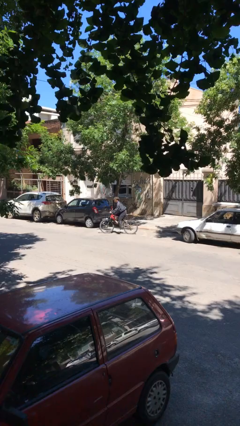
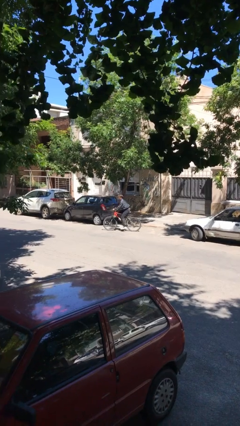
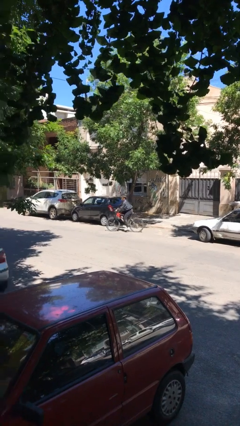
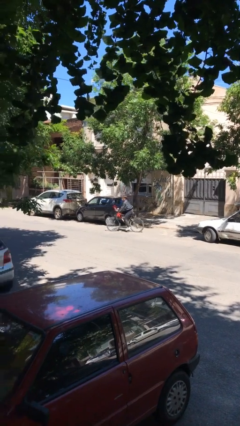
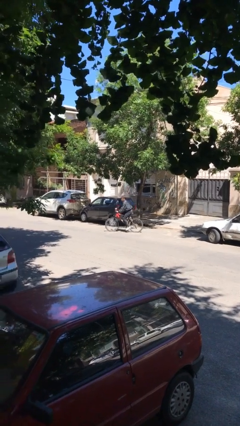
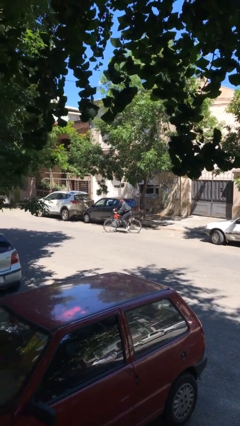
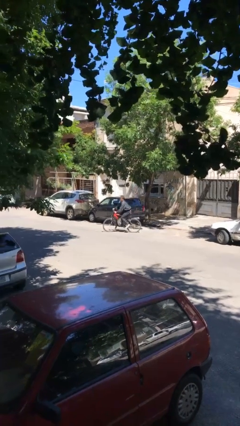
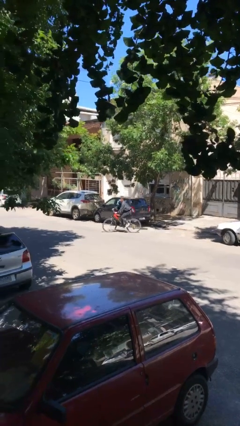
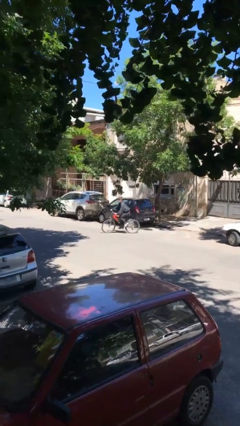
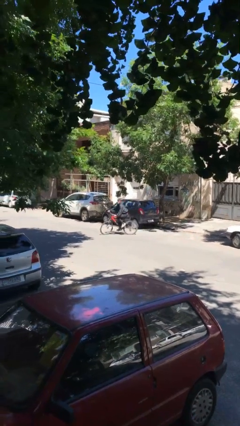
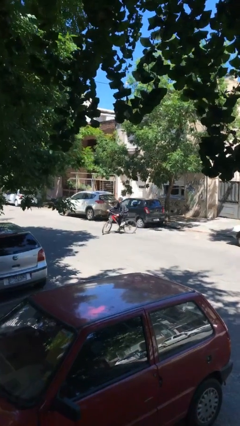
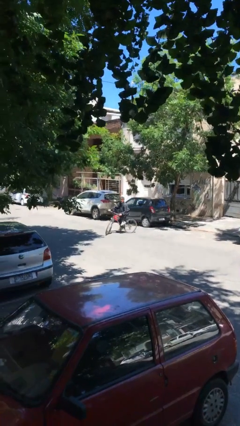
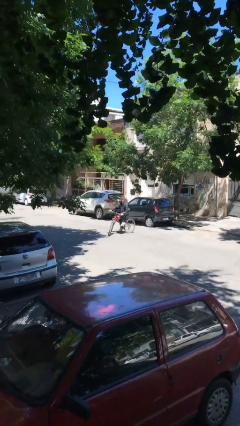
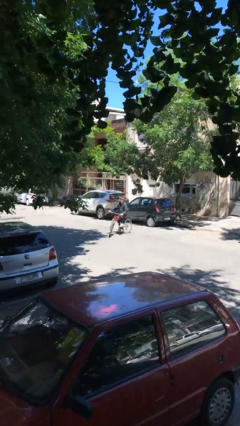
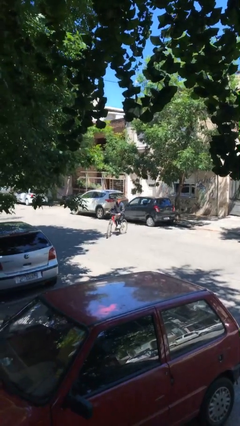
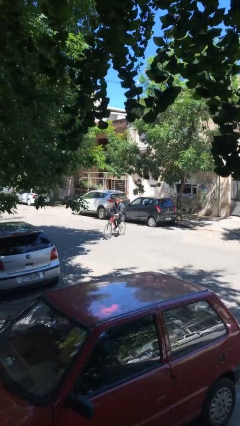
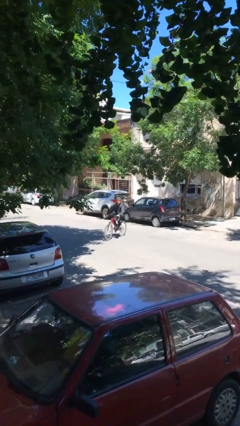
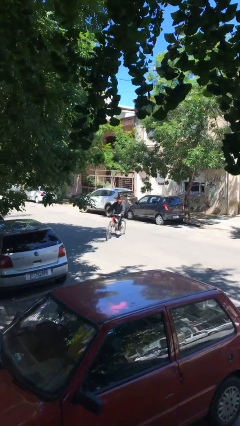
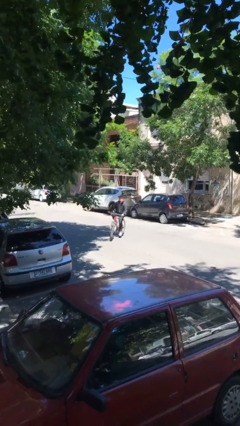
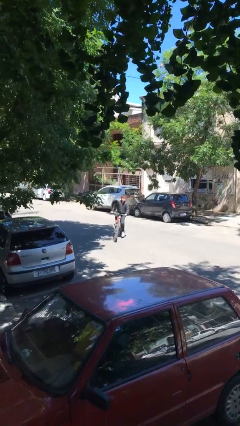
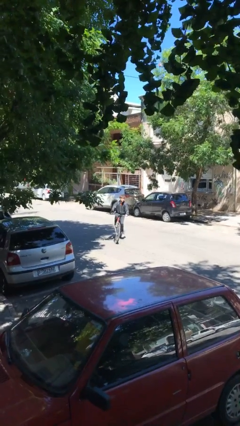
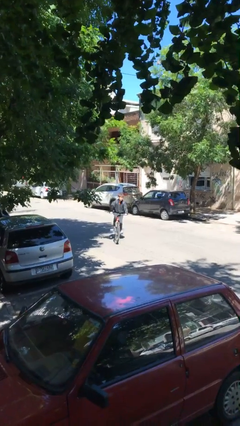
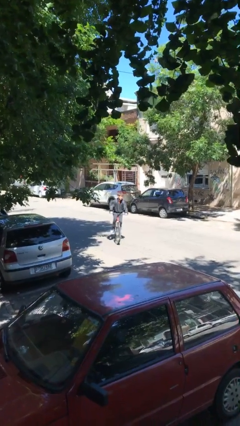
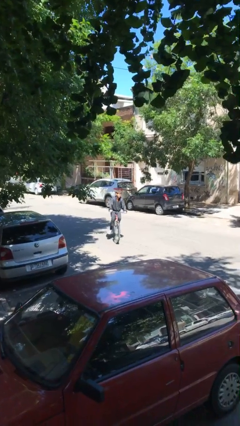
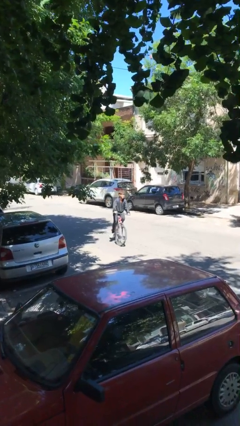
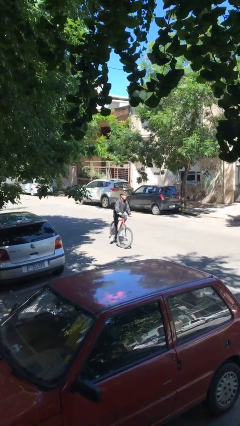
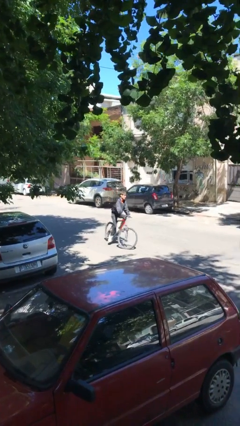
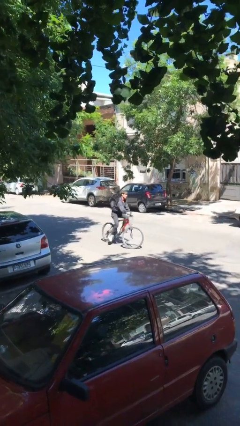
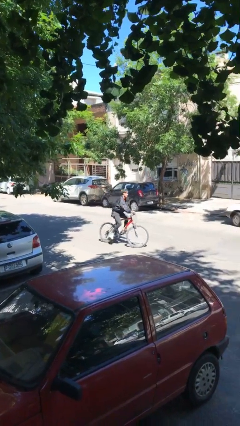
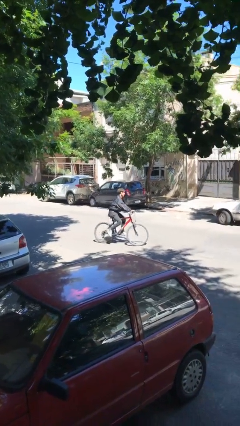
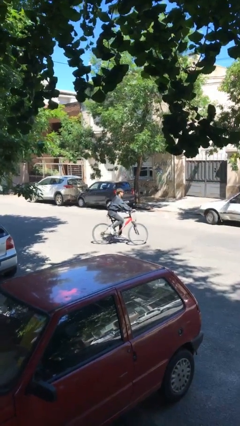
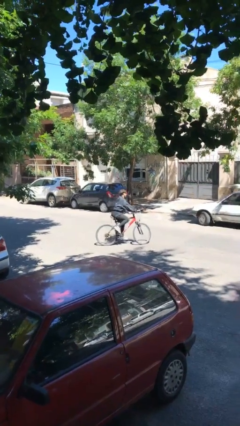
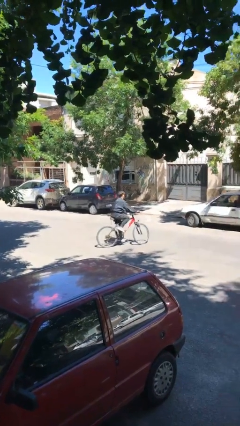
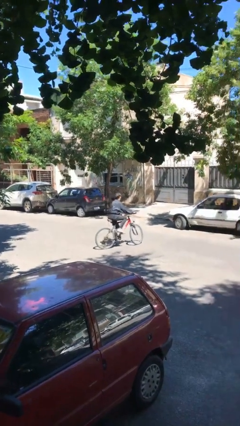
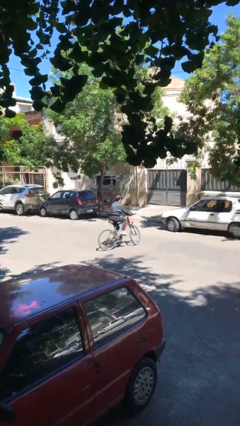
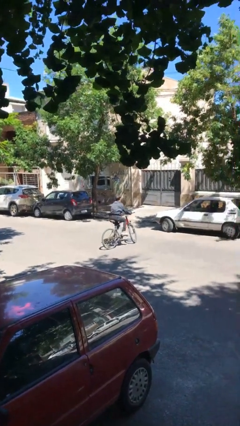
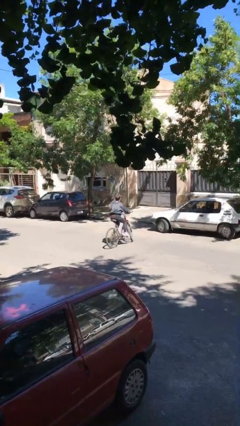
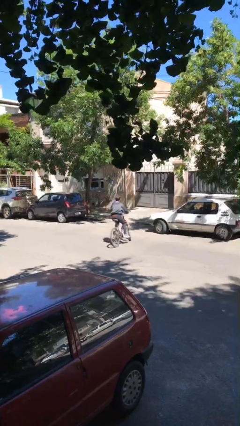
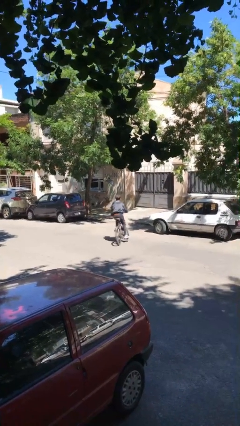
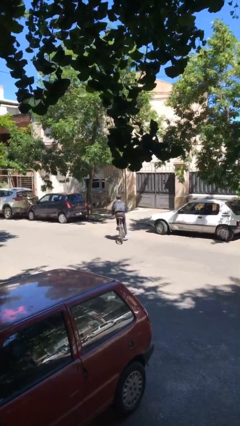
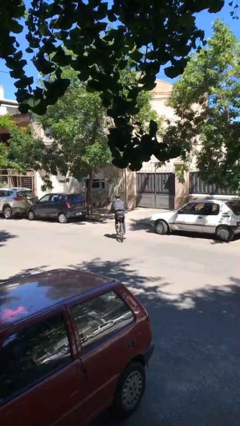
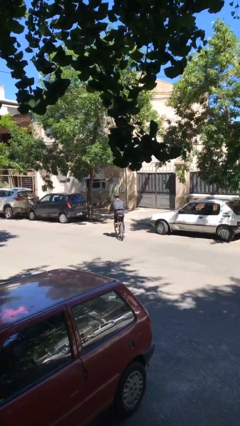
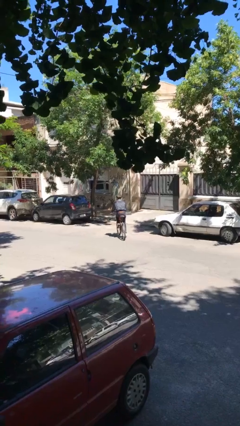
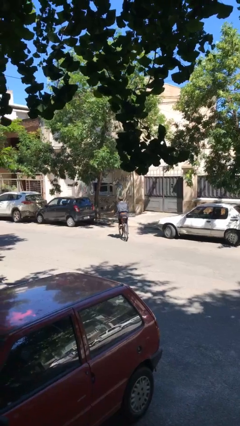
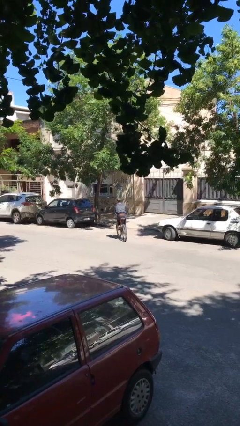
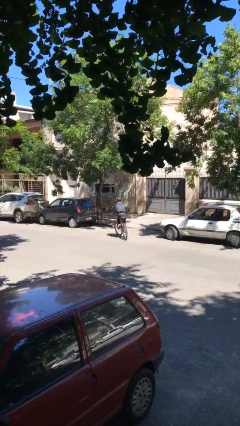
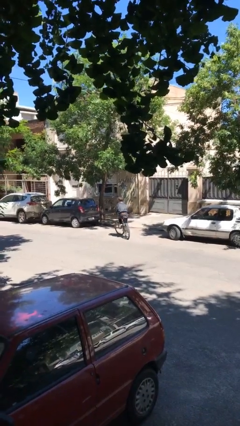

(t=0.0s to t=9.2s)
person rides bicycle

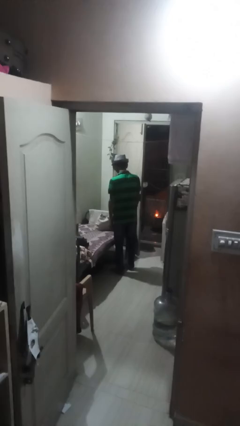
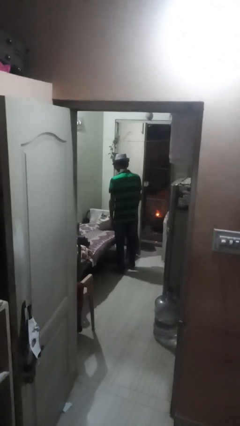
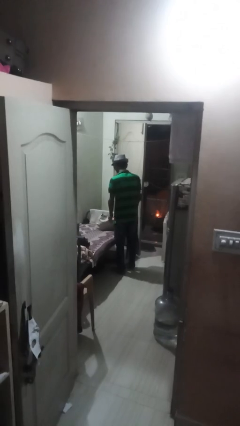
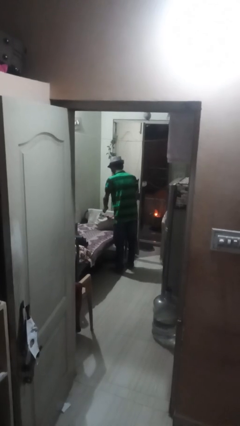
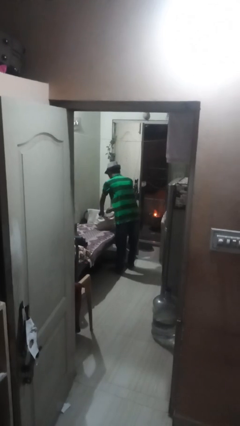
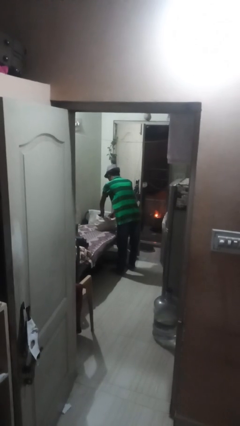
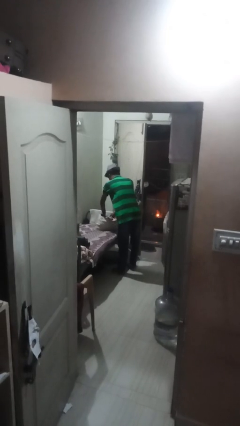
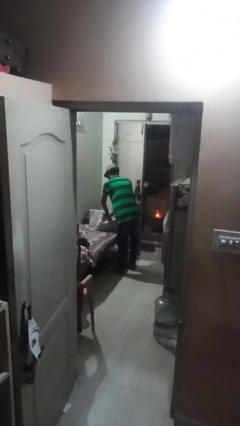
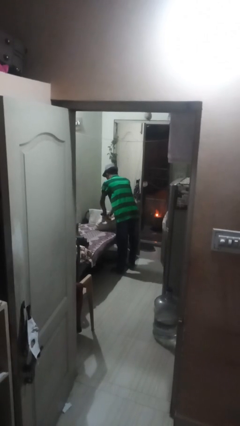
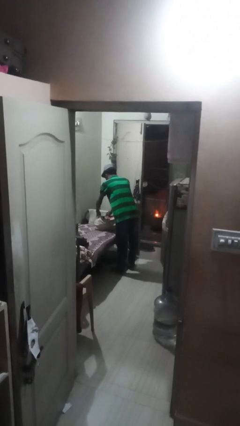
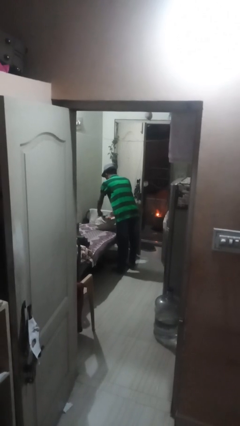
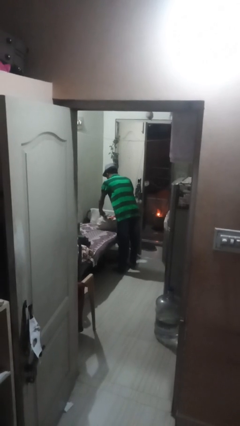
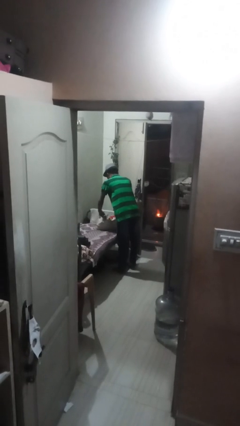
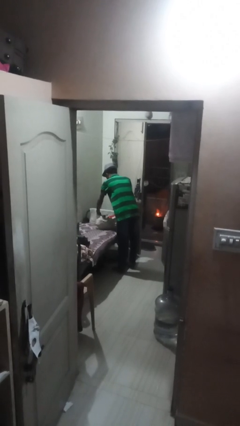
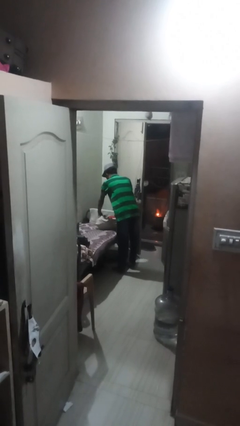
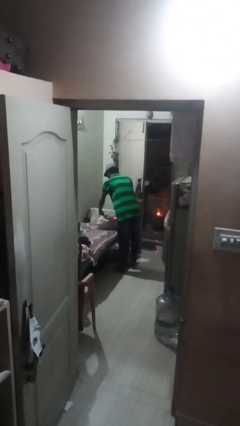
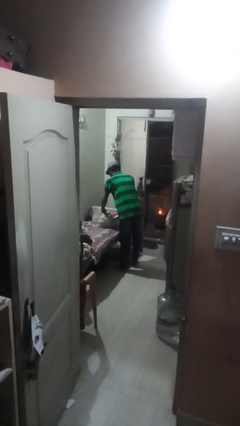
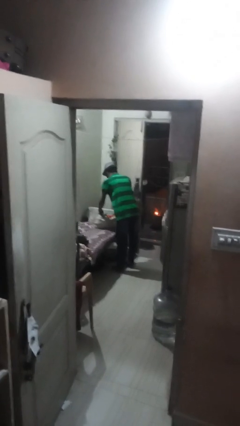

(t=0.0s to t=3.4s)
person searches in bag

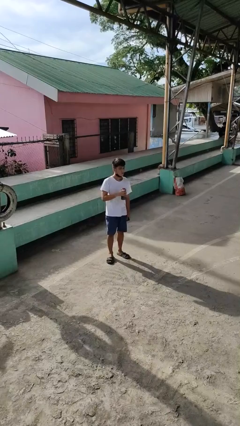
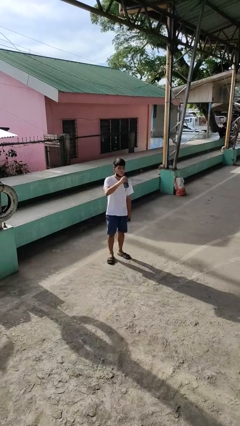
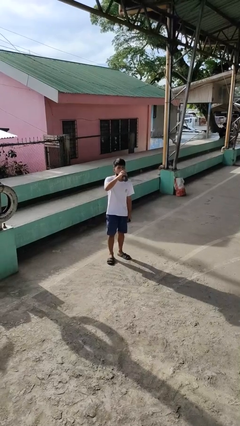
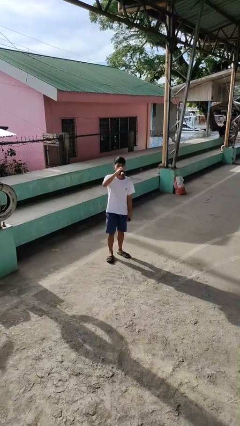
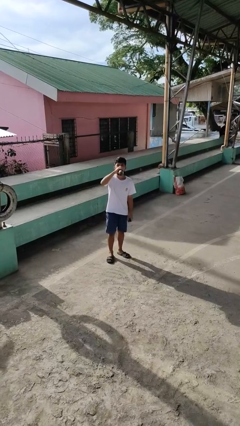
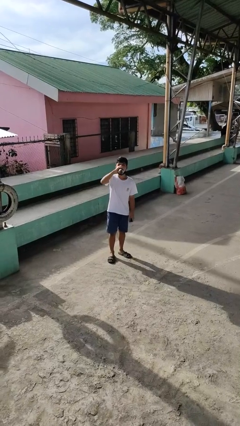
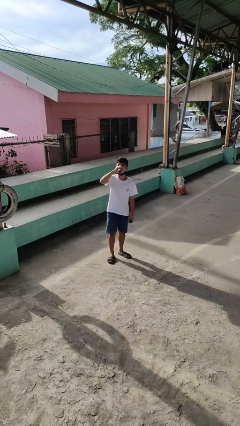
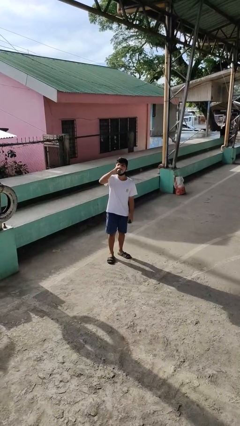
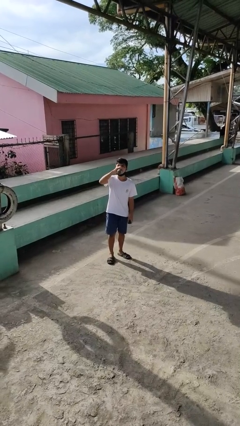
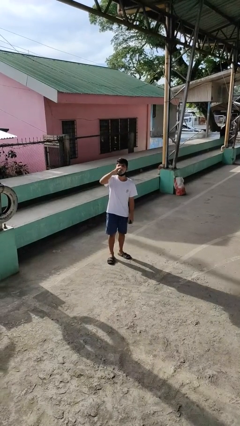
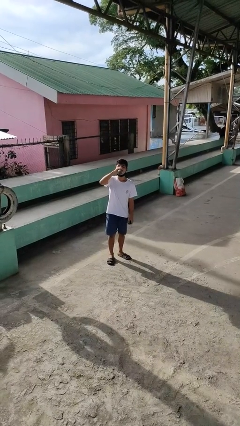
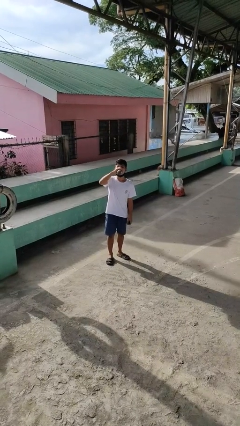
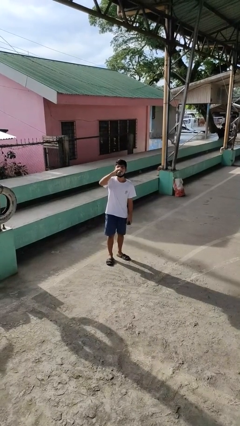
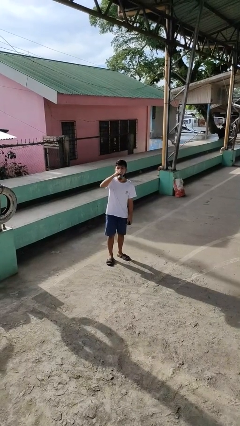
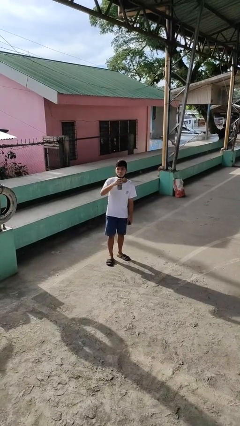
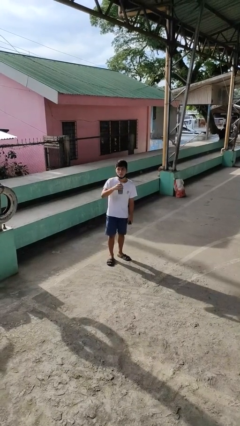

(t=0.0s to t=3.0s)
person drinks from bottle

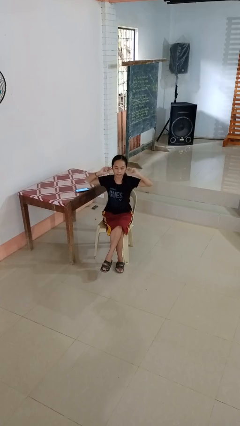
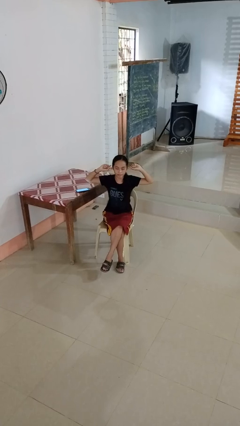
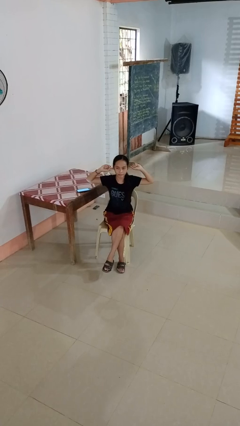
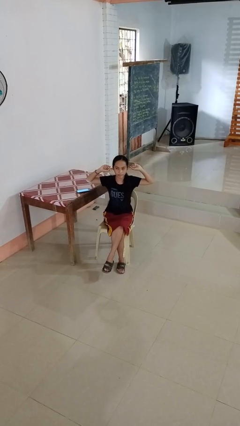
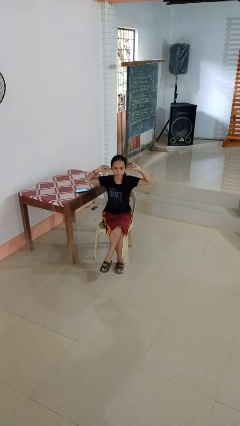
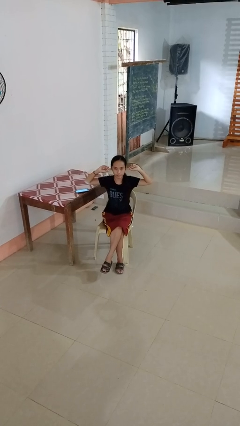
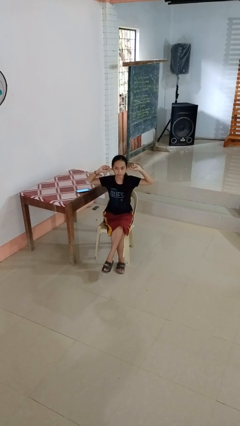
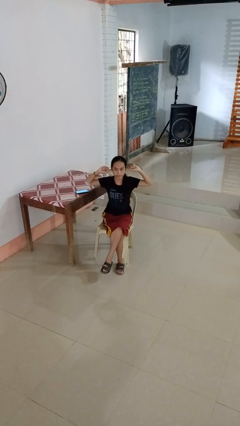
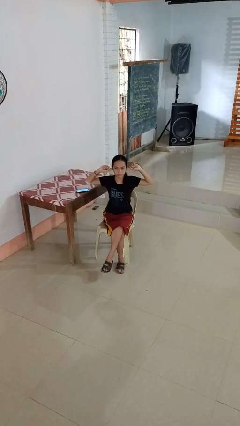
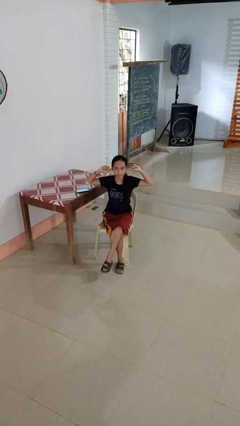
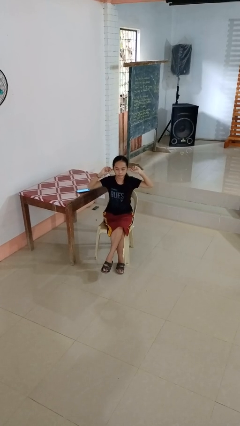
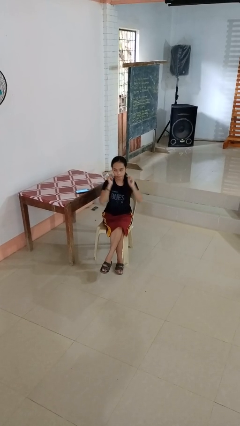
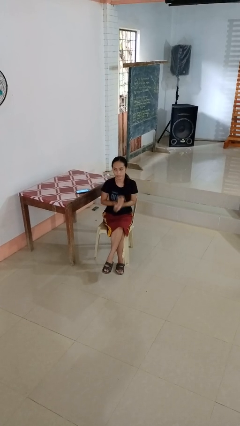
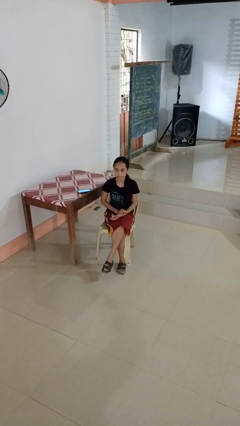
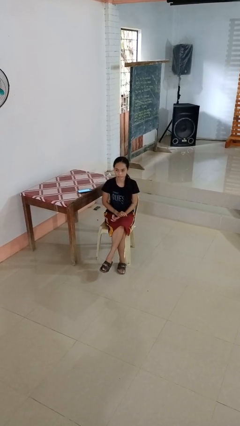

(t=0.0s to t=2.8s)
person puts fingers in ear
